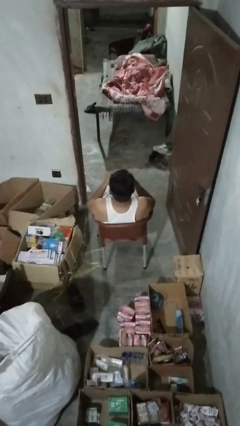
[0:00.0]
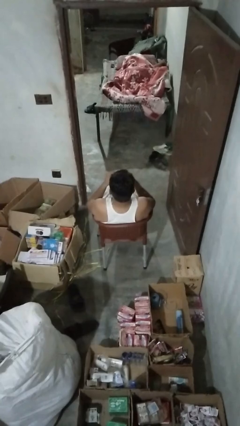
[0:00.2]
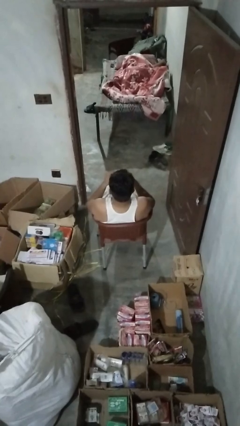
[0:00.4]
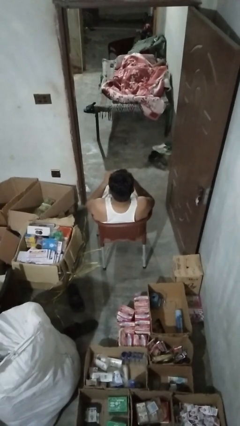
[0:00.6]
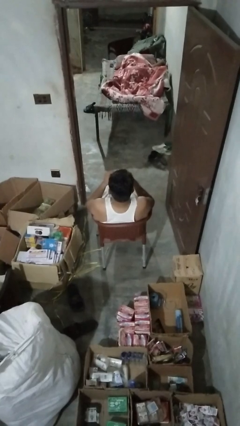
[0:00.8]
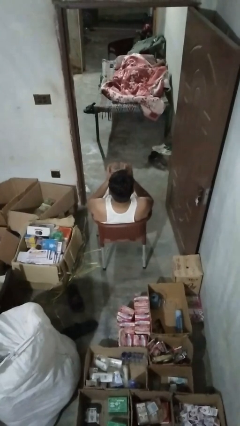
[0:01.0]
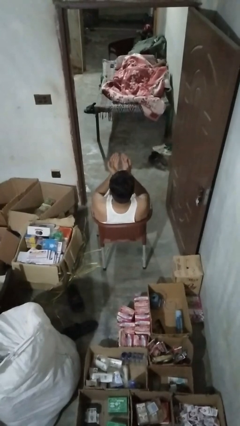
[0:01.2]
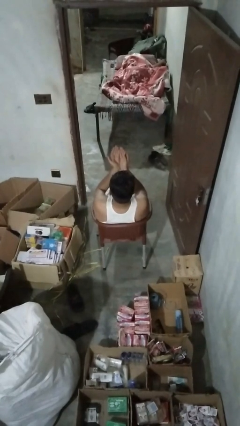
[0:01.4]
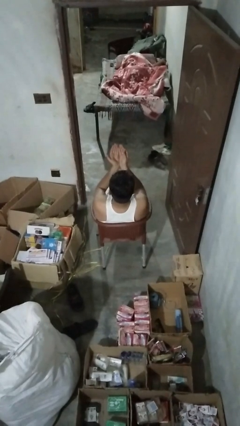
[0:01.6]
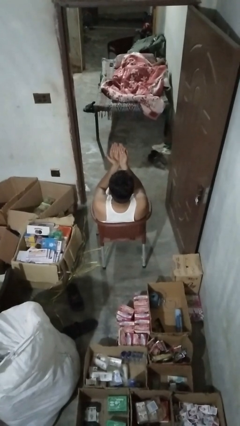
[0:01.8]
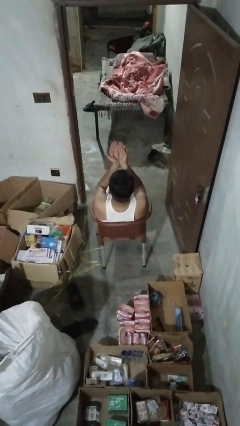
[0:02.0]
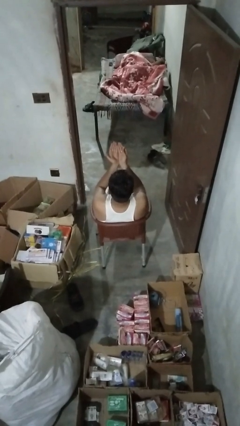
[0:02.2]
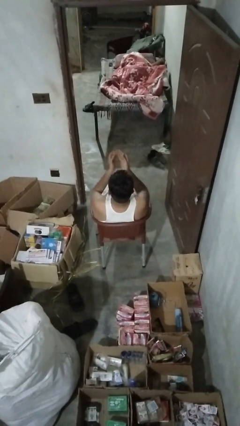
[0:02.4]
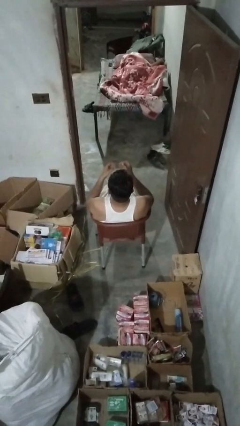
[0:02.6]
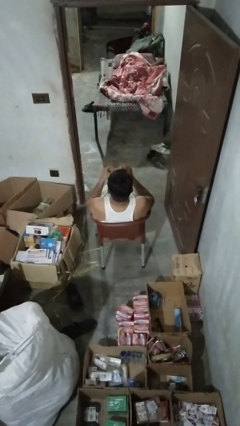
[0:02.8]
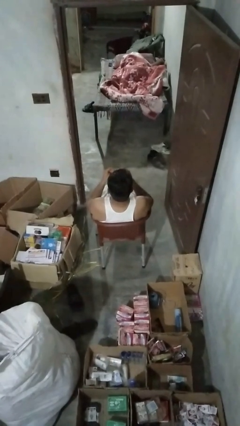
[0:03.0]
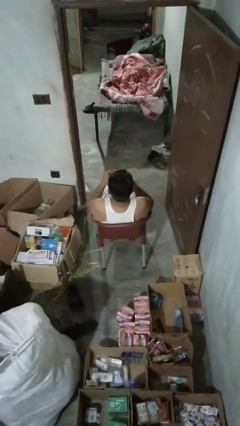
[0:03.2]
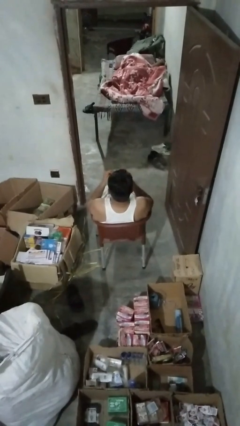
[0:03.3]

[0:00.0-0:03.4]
person prays

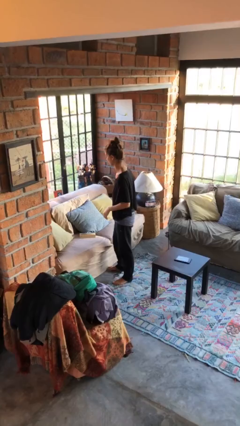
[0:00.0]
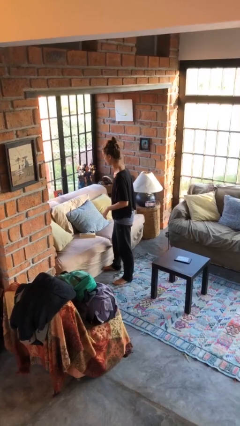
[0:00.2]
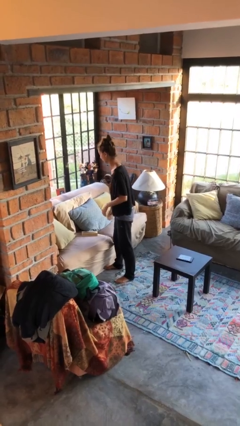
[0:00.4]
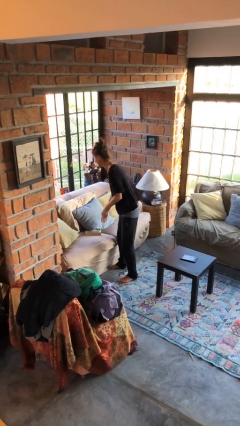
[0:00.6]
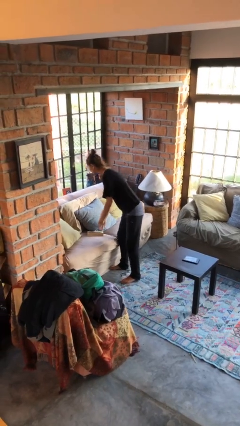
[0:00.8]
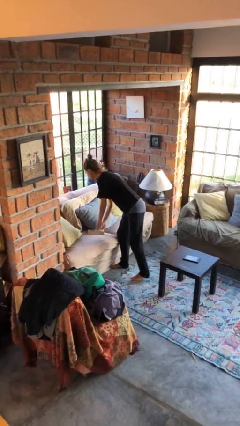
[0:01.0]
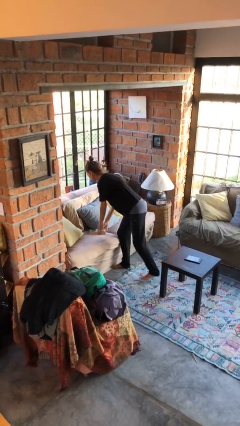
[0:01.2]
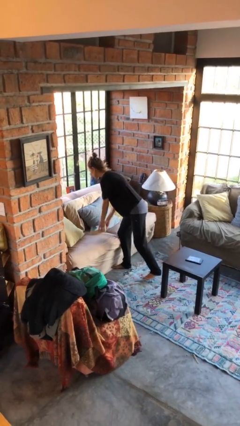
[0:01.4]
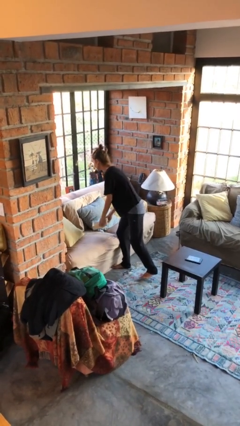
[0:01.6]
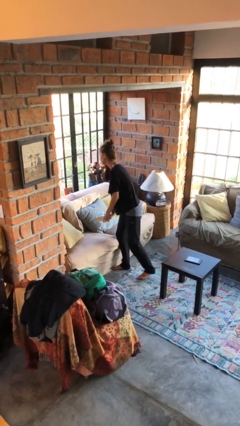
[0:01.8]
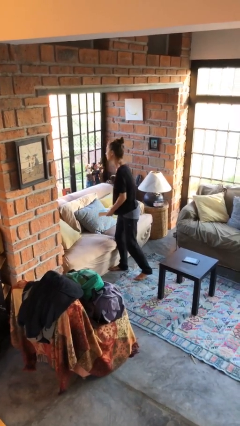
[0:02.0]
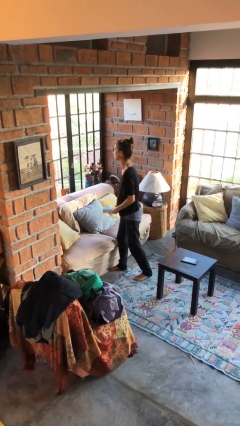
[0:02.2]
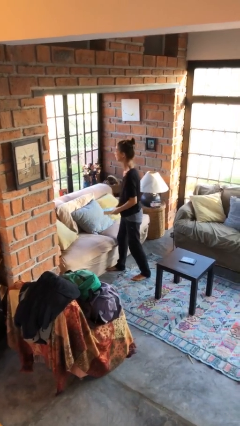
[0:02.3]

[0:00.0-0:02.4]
person picks up object from couch

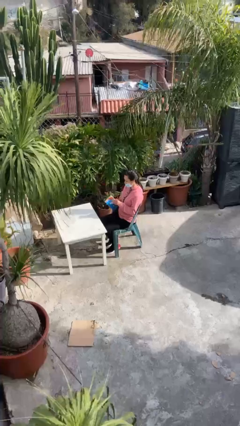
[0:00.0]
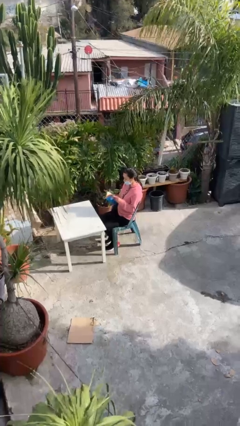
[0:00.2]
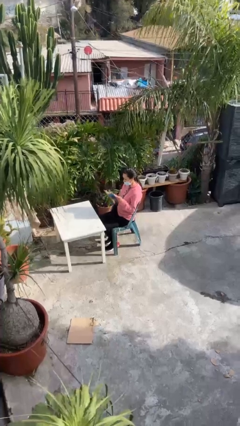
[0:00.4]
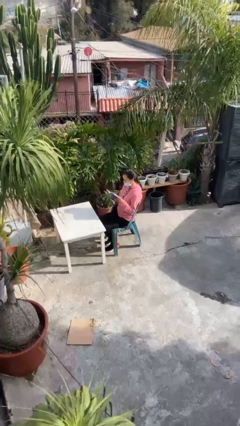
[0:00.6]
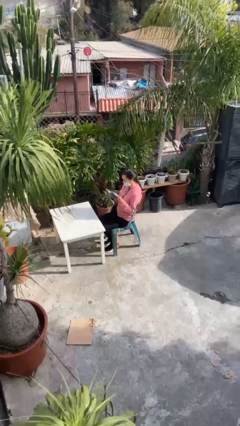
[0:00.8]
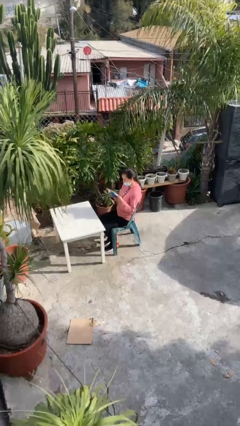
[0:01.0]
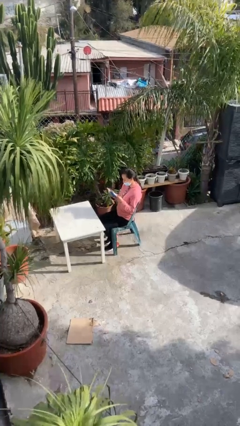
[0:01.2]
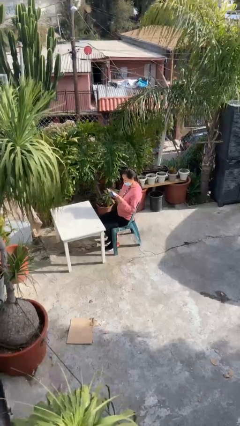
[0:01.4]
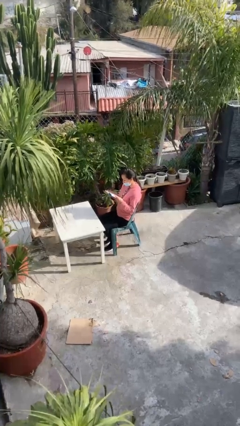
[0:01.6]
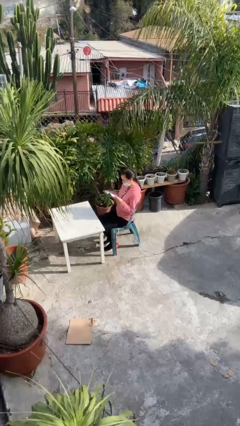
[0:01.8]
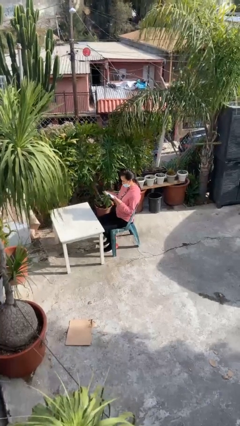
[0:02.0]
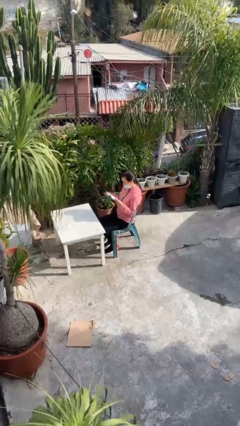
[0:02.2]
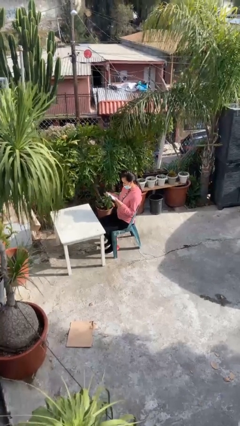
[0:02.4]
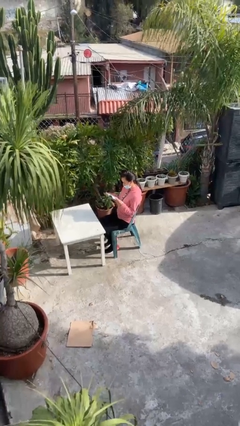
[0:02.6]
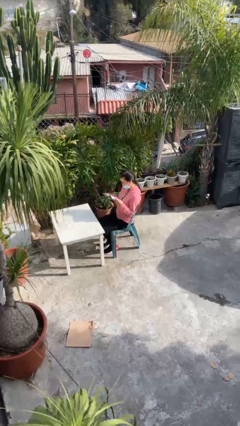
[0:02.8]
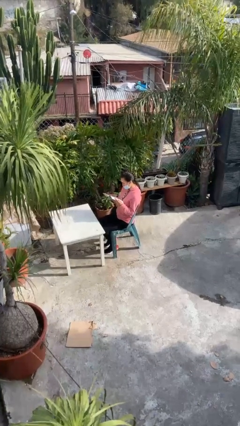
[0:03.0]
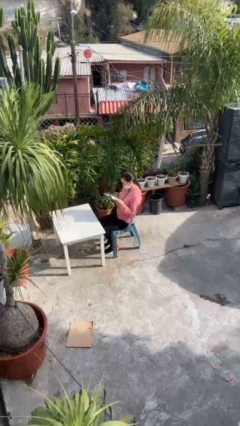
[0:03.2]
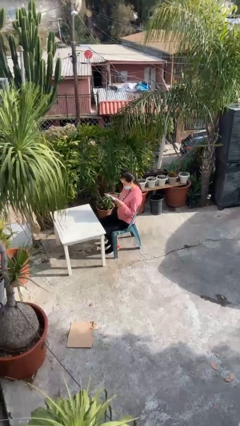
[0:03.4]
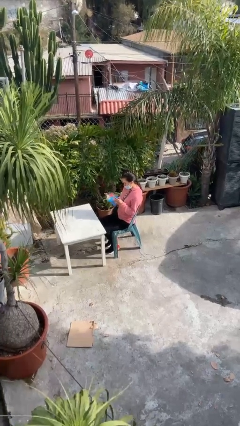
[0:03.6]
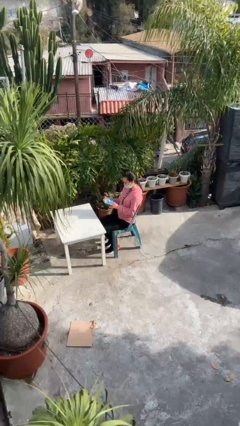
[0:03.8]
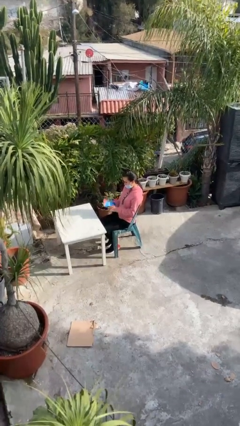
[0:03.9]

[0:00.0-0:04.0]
person reads document

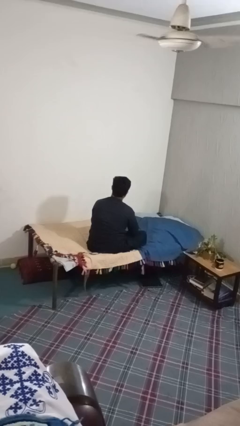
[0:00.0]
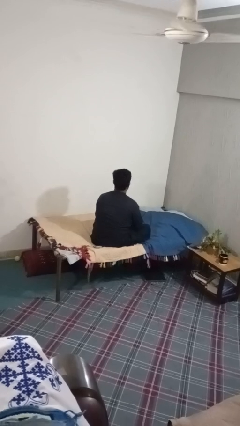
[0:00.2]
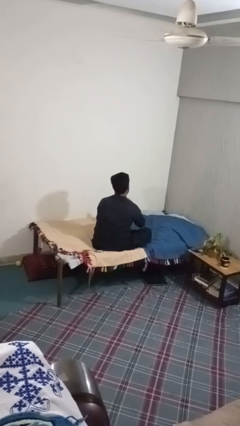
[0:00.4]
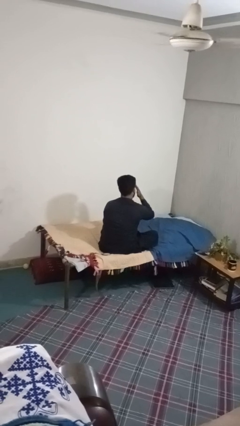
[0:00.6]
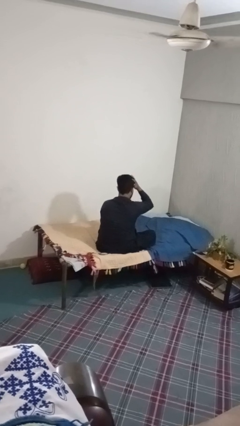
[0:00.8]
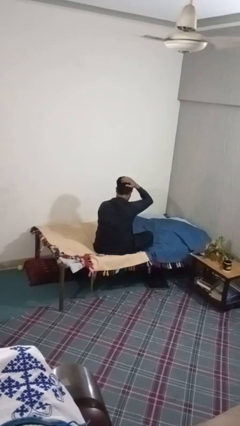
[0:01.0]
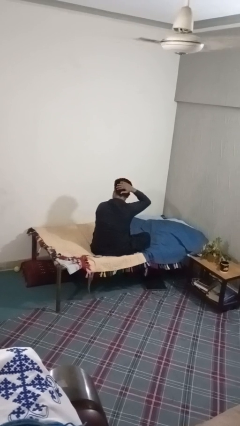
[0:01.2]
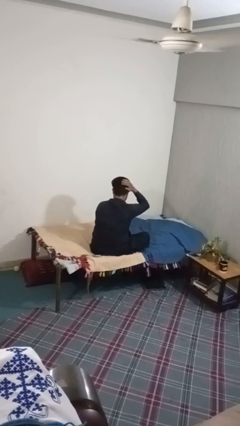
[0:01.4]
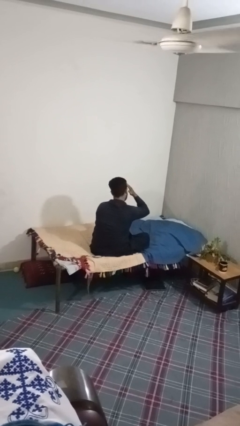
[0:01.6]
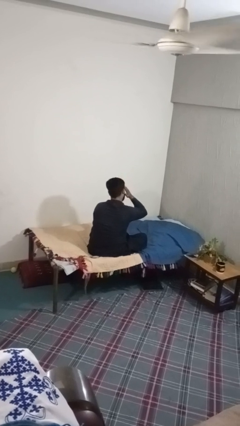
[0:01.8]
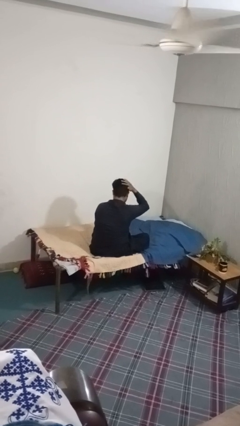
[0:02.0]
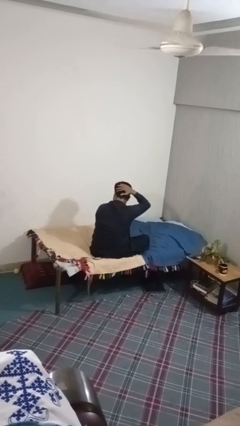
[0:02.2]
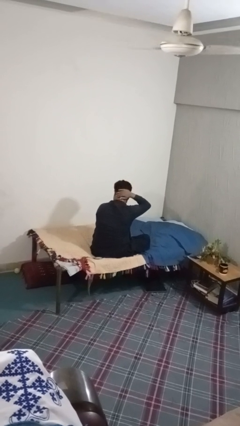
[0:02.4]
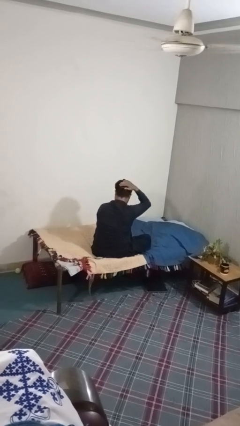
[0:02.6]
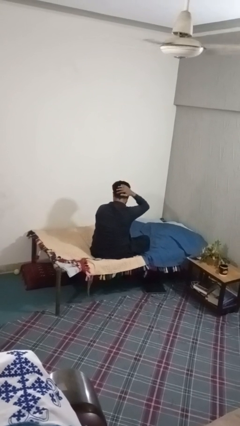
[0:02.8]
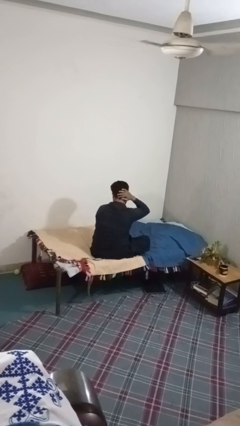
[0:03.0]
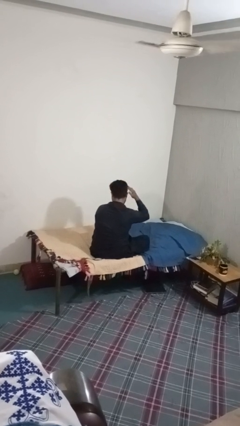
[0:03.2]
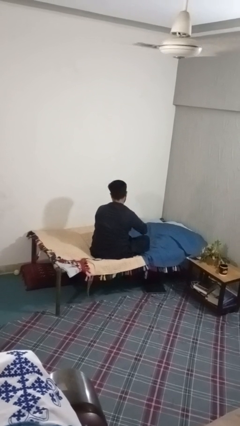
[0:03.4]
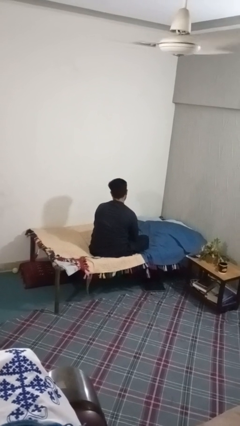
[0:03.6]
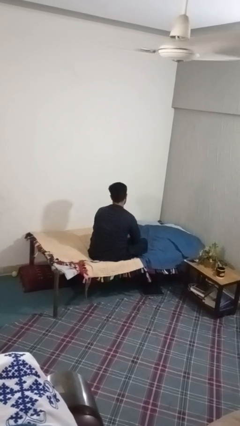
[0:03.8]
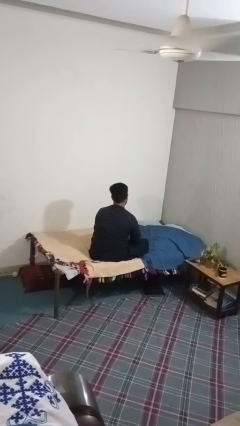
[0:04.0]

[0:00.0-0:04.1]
person strokes hair

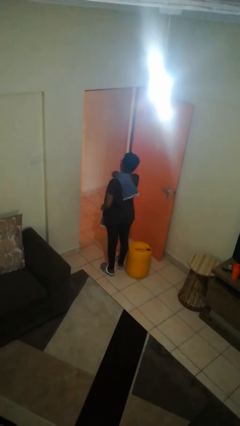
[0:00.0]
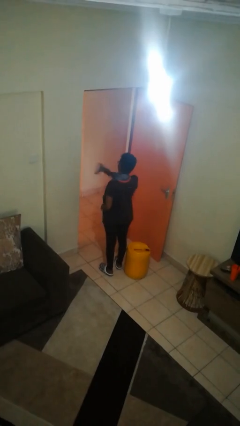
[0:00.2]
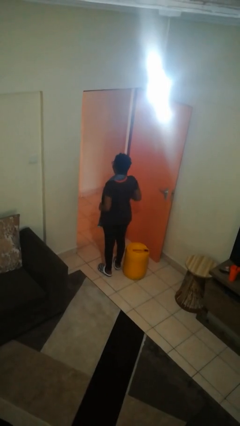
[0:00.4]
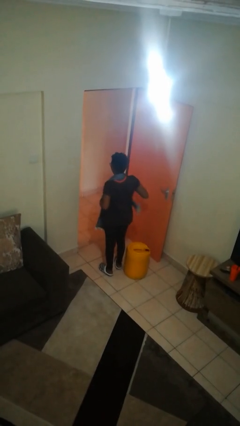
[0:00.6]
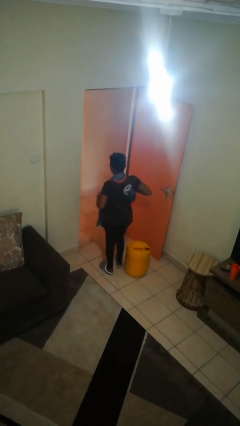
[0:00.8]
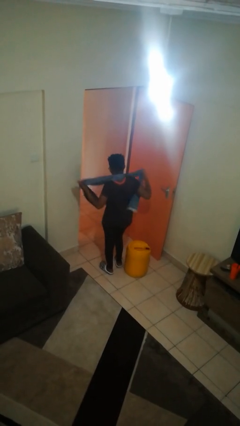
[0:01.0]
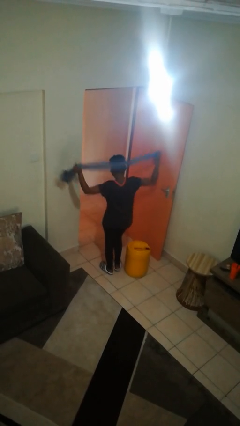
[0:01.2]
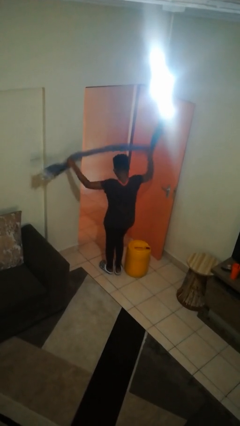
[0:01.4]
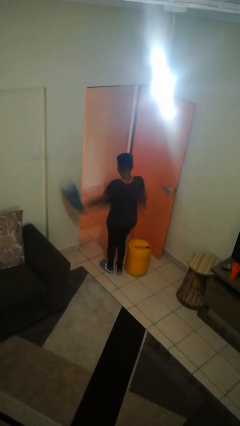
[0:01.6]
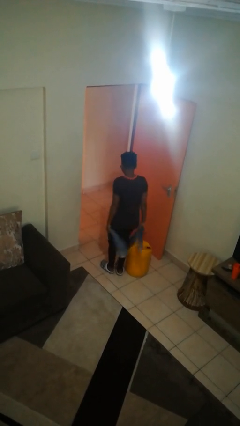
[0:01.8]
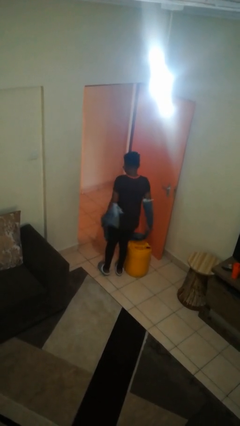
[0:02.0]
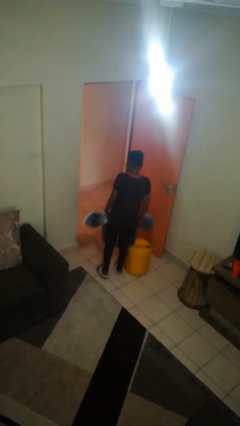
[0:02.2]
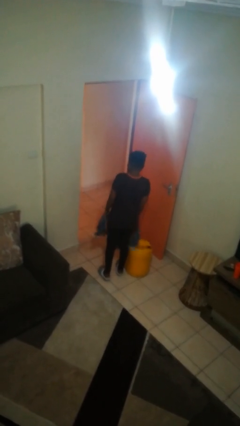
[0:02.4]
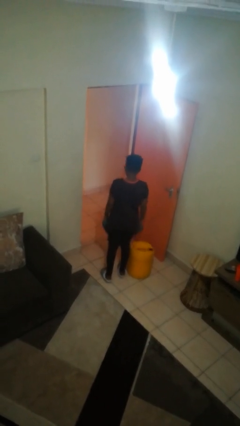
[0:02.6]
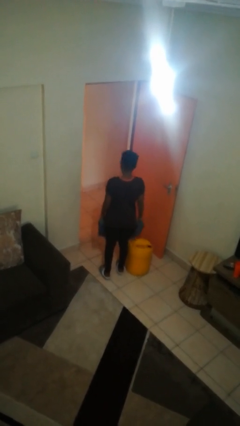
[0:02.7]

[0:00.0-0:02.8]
person takes off scarf

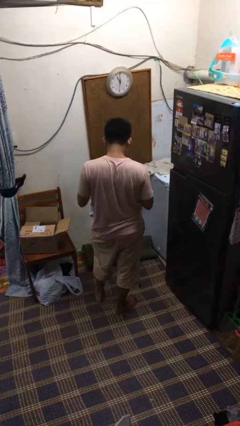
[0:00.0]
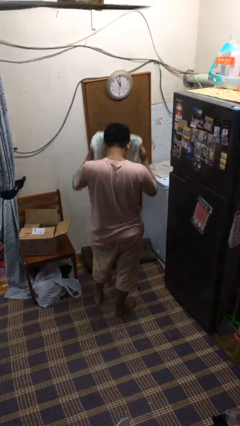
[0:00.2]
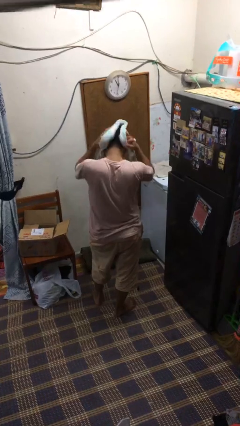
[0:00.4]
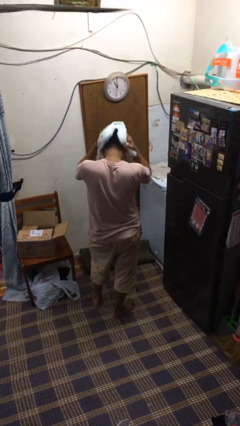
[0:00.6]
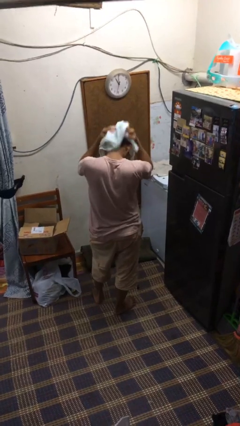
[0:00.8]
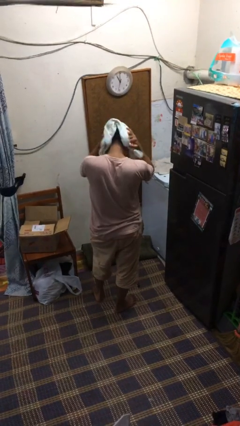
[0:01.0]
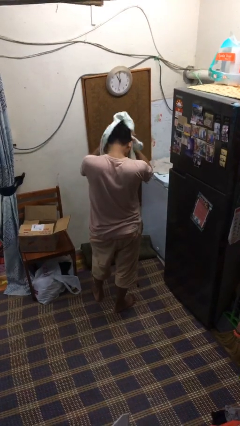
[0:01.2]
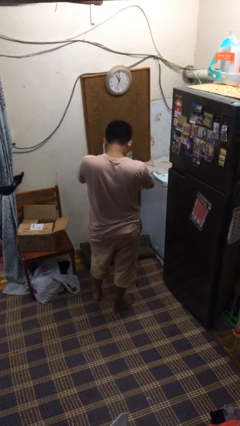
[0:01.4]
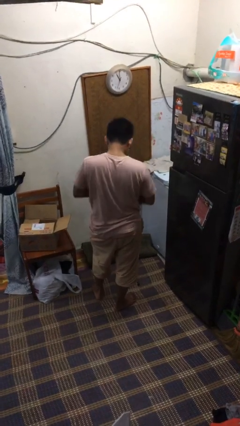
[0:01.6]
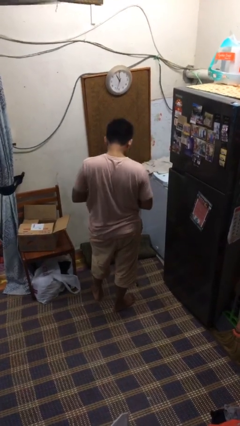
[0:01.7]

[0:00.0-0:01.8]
person dries hair with towel
